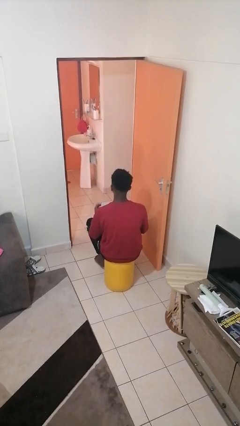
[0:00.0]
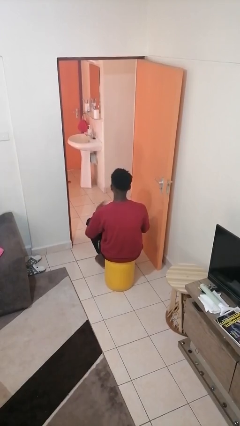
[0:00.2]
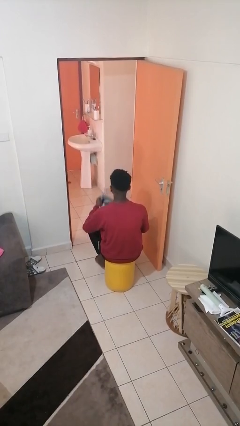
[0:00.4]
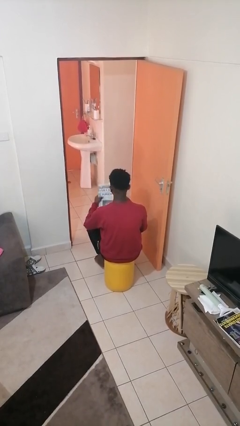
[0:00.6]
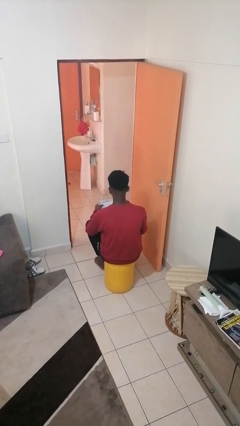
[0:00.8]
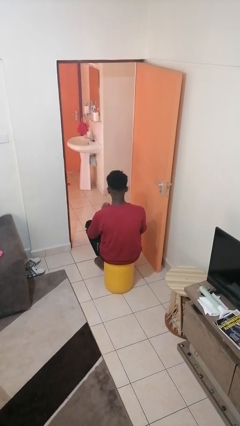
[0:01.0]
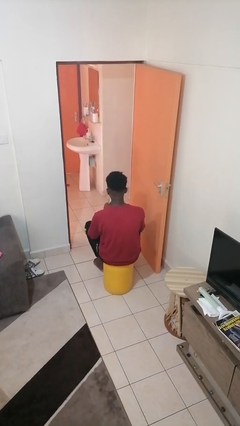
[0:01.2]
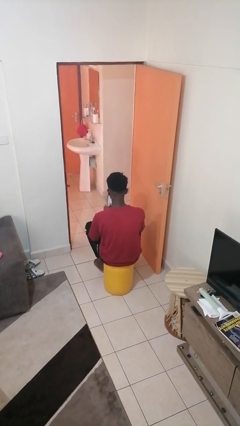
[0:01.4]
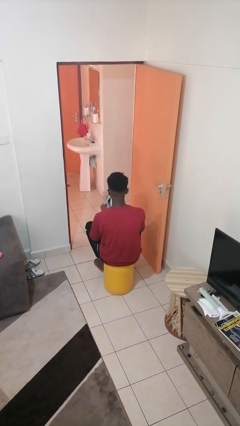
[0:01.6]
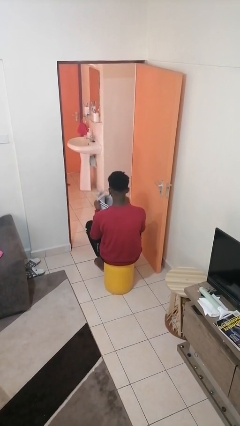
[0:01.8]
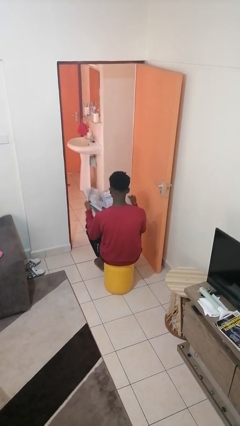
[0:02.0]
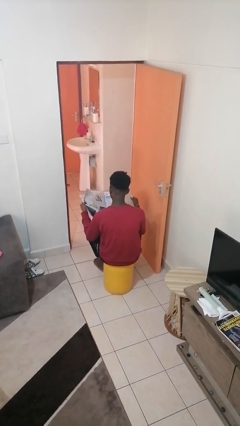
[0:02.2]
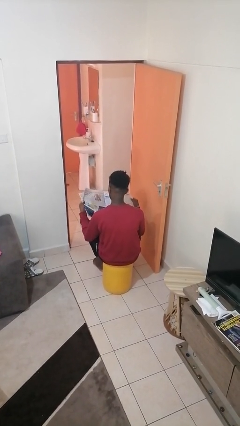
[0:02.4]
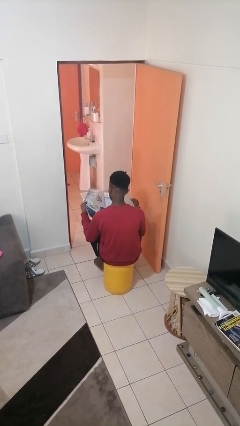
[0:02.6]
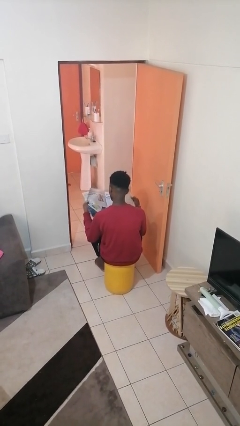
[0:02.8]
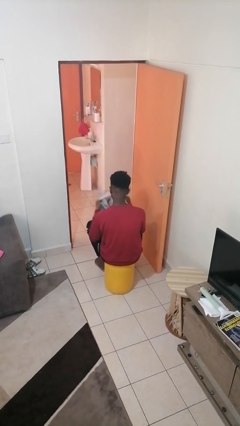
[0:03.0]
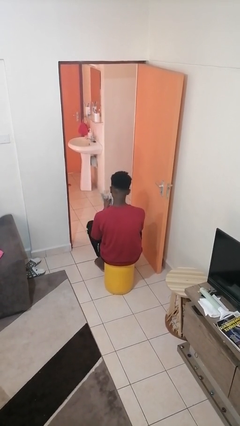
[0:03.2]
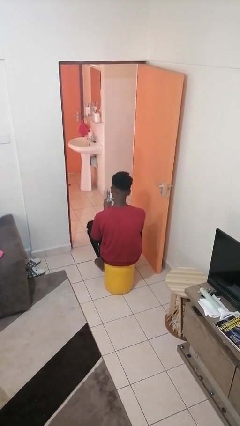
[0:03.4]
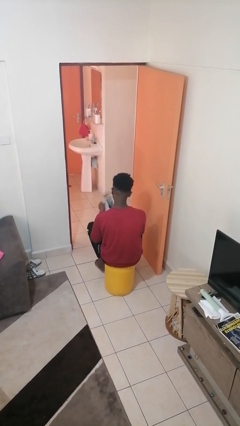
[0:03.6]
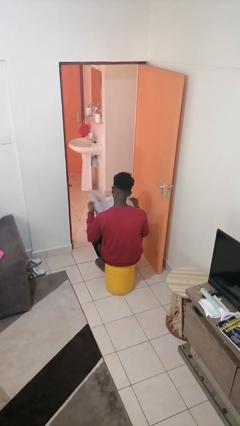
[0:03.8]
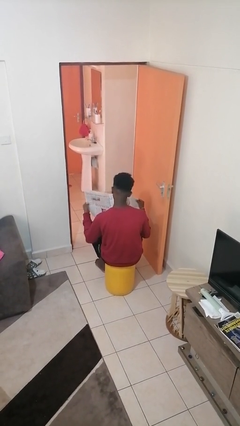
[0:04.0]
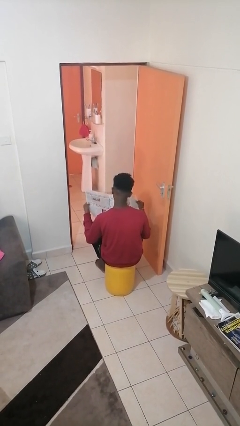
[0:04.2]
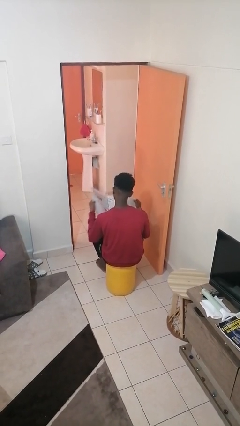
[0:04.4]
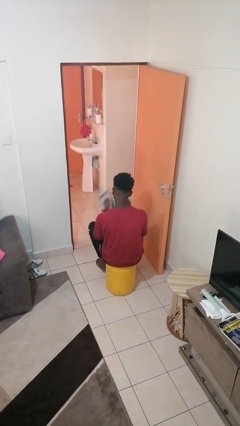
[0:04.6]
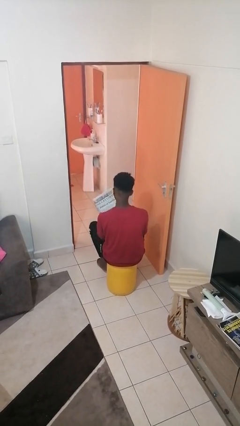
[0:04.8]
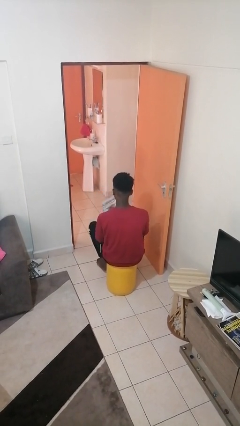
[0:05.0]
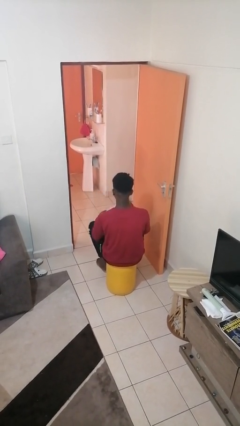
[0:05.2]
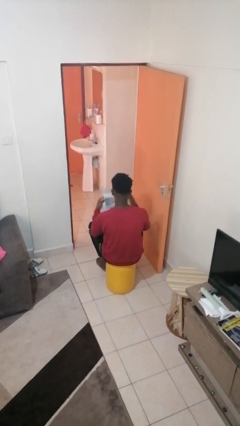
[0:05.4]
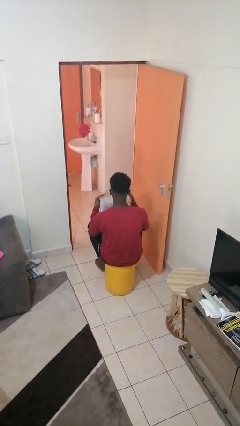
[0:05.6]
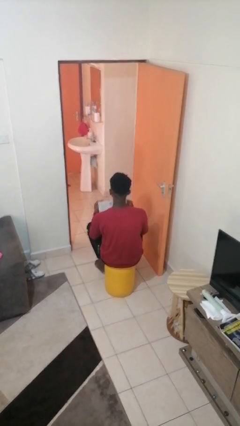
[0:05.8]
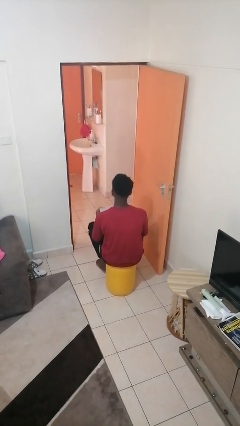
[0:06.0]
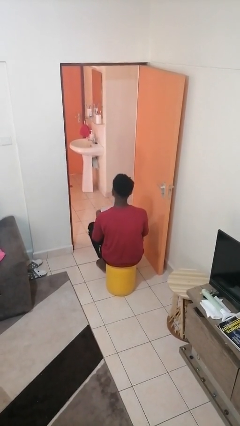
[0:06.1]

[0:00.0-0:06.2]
person reads newspaper

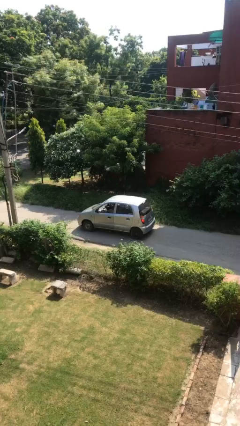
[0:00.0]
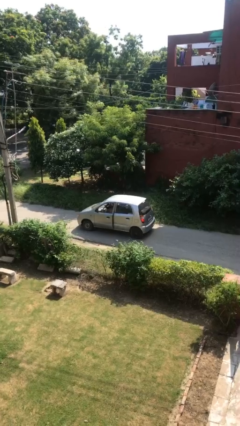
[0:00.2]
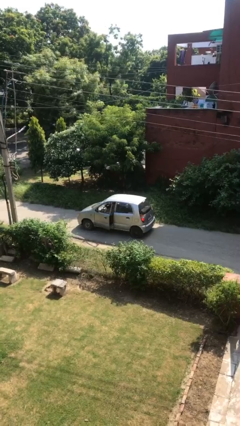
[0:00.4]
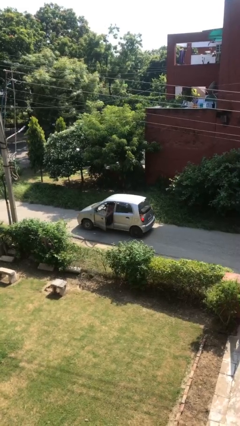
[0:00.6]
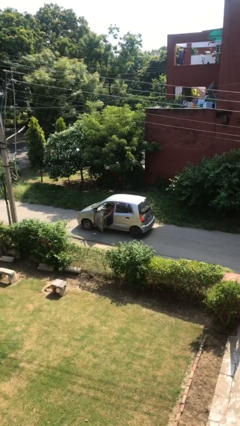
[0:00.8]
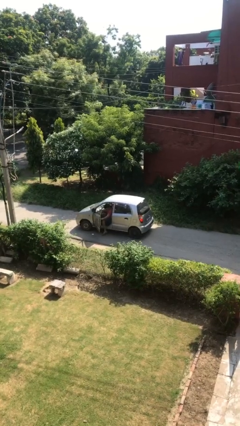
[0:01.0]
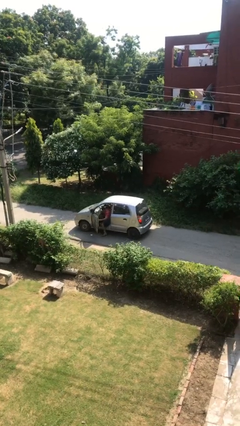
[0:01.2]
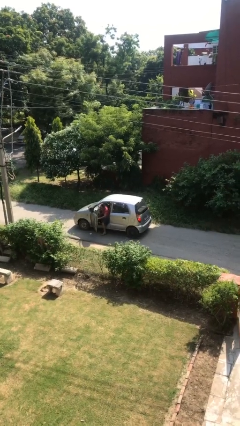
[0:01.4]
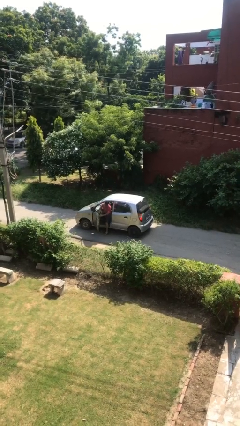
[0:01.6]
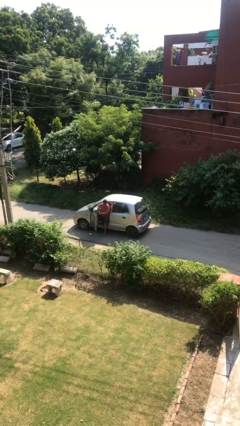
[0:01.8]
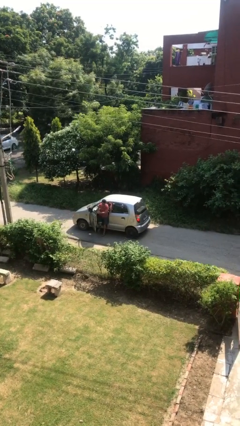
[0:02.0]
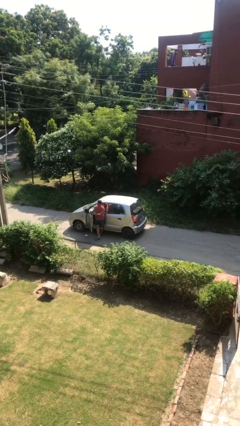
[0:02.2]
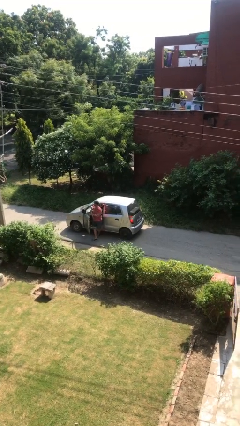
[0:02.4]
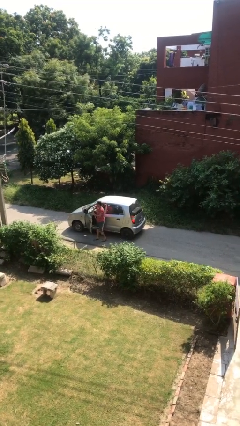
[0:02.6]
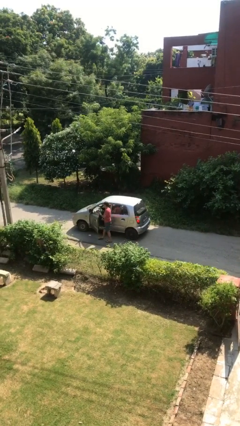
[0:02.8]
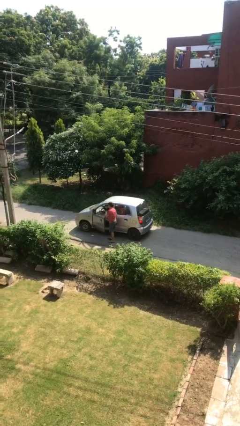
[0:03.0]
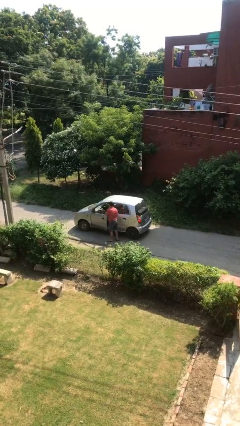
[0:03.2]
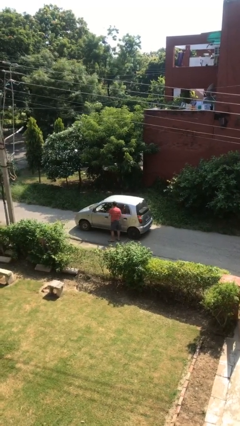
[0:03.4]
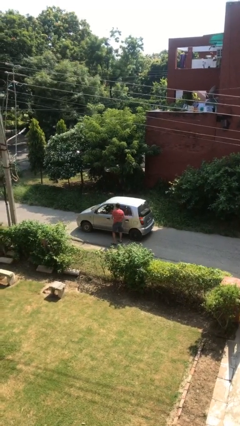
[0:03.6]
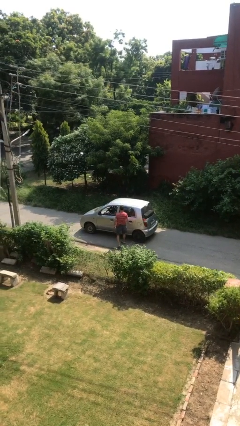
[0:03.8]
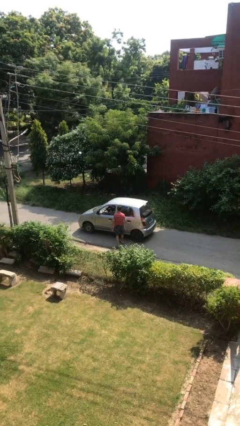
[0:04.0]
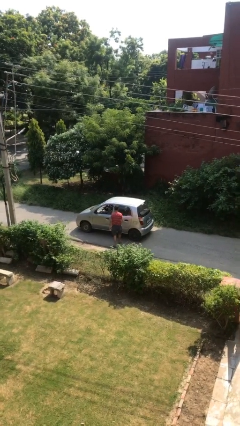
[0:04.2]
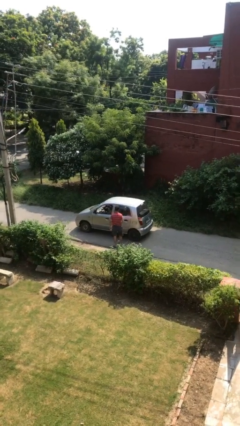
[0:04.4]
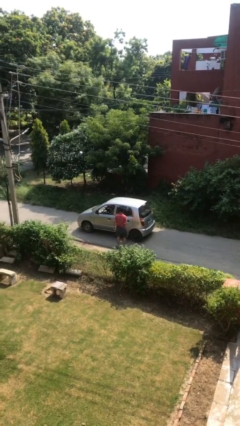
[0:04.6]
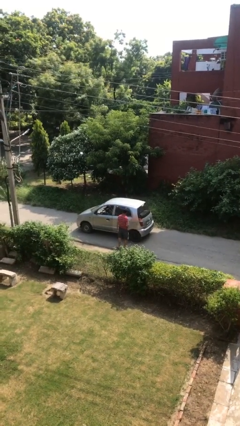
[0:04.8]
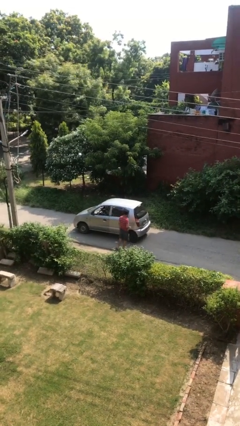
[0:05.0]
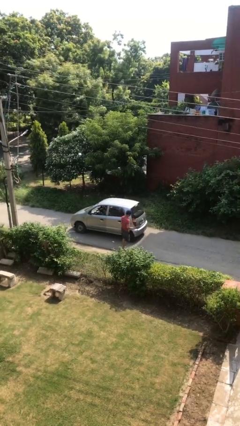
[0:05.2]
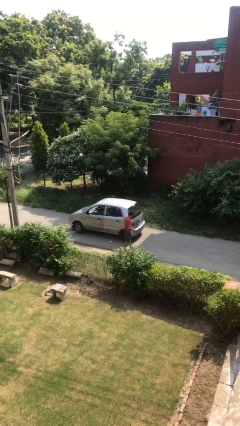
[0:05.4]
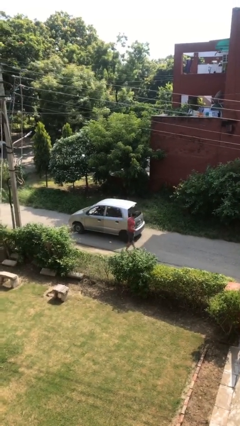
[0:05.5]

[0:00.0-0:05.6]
car drops off person

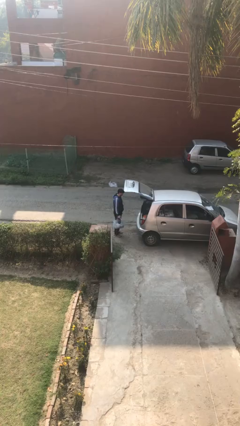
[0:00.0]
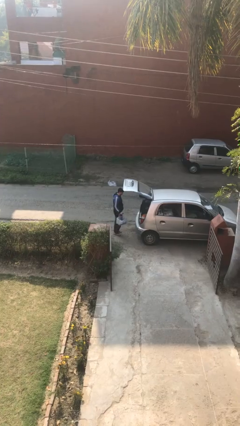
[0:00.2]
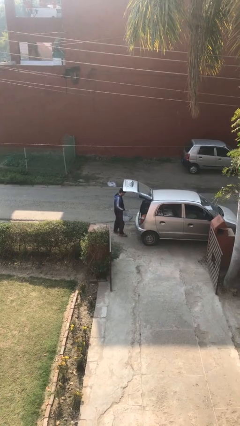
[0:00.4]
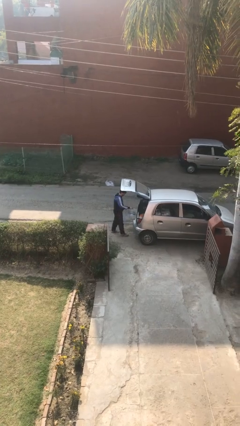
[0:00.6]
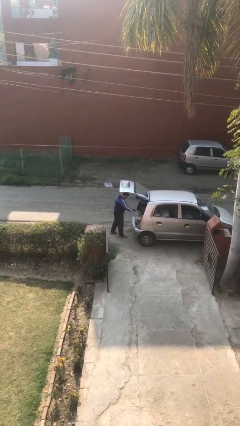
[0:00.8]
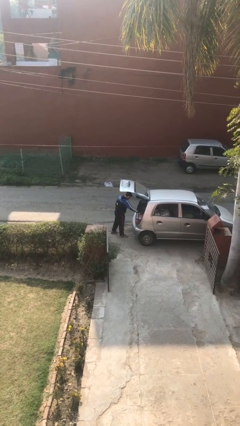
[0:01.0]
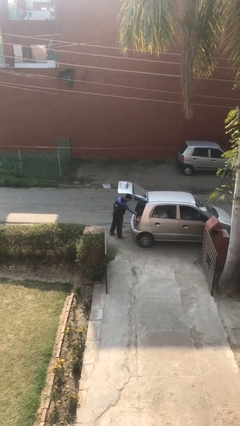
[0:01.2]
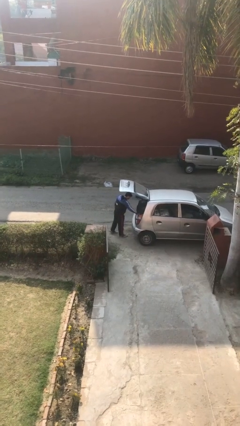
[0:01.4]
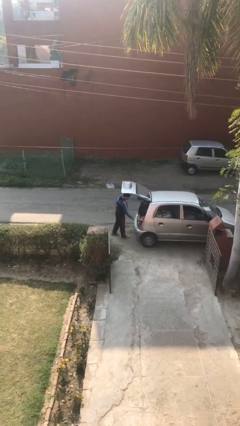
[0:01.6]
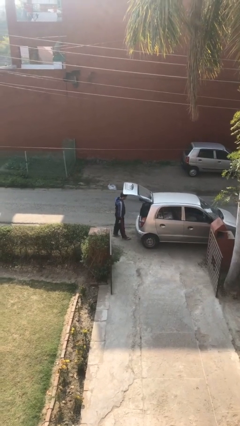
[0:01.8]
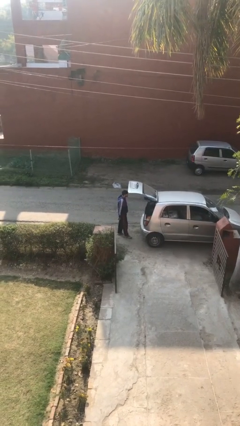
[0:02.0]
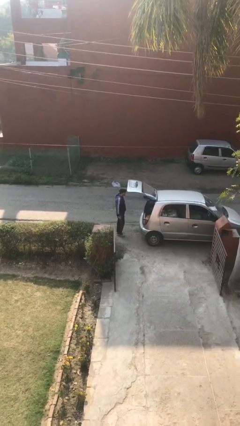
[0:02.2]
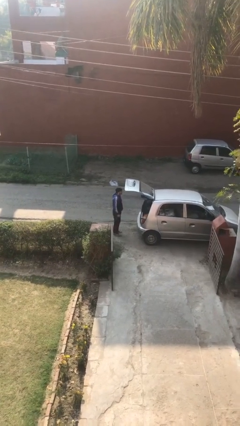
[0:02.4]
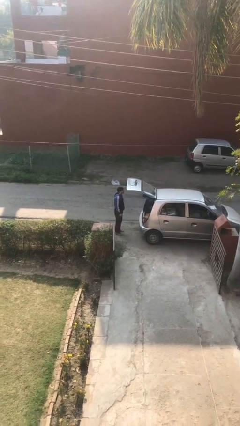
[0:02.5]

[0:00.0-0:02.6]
person loads car

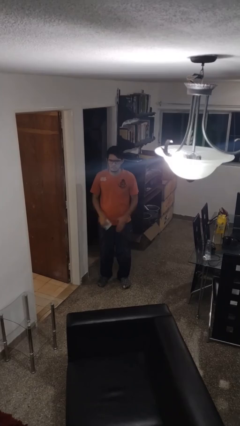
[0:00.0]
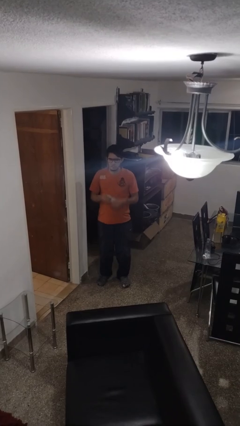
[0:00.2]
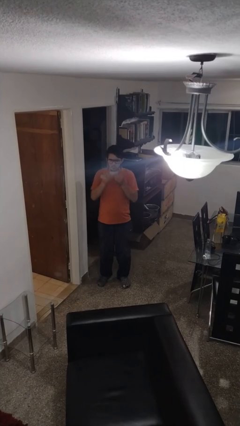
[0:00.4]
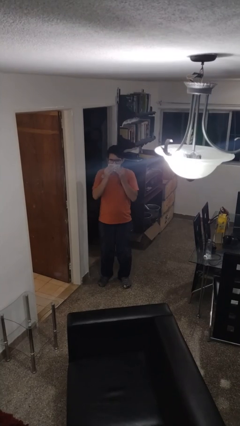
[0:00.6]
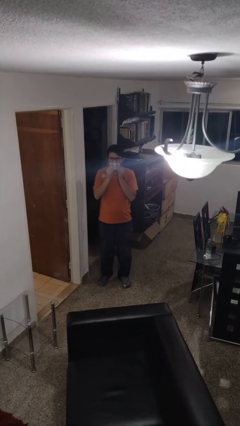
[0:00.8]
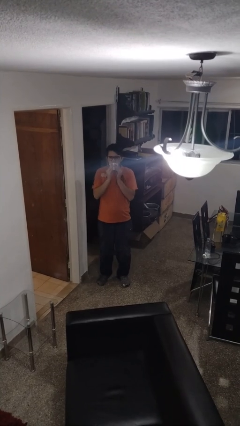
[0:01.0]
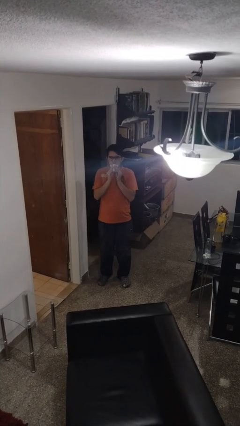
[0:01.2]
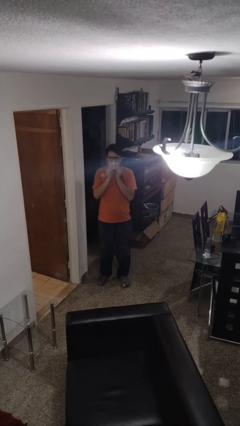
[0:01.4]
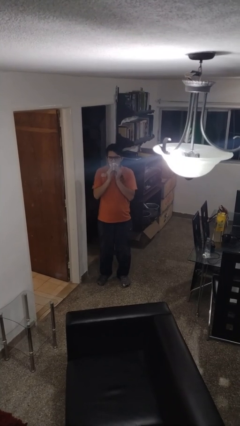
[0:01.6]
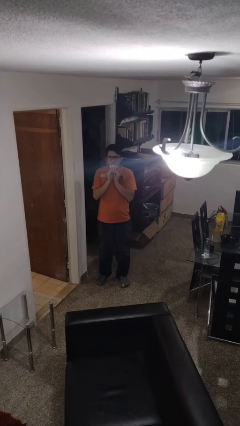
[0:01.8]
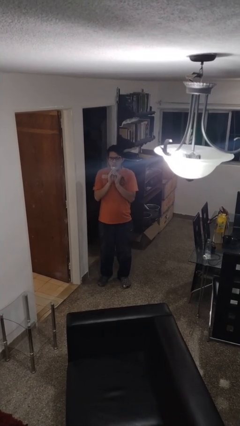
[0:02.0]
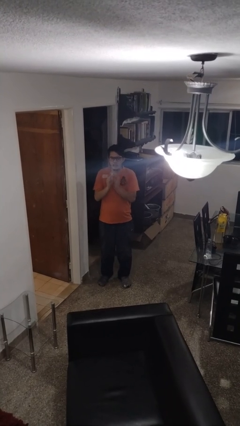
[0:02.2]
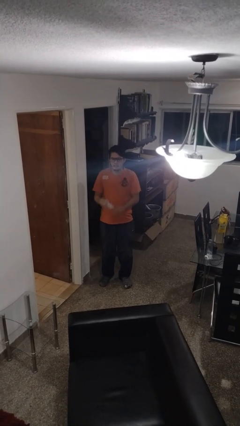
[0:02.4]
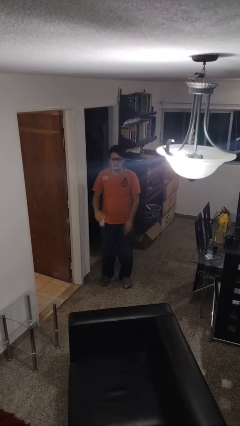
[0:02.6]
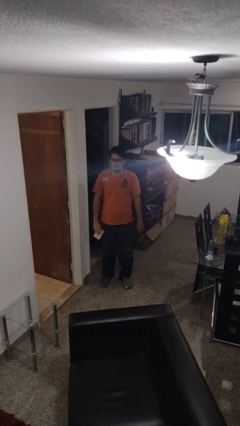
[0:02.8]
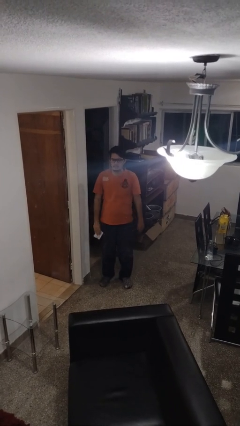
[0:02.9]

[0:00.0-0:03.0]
person wipes mouth with napkin

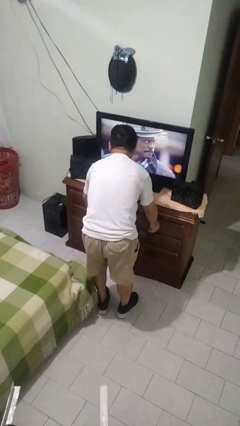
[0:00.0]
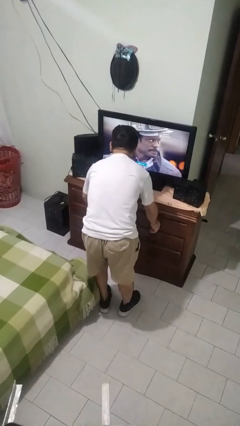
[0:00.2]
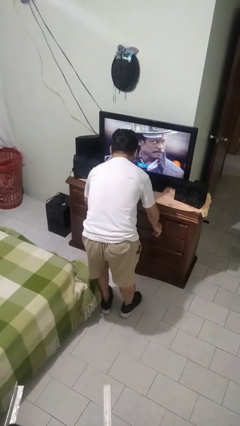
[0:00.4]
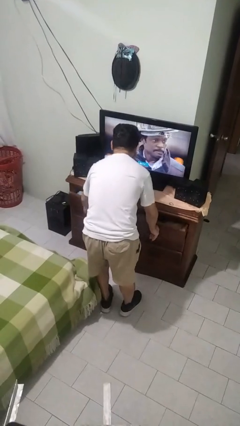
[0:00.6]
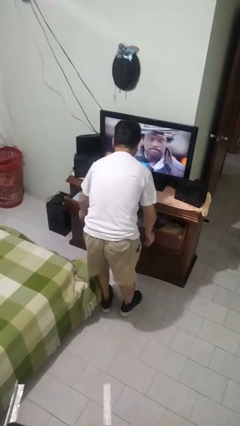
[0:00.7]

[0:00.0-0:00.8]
person opens dresser drawer
